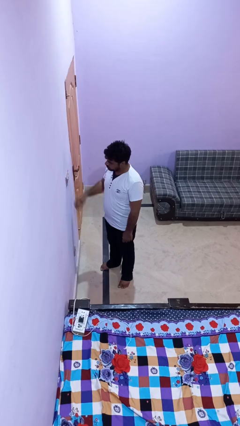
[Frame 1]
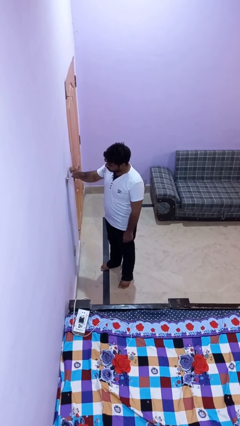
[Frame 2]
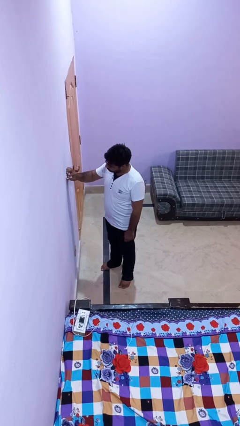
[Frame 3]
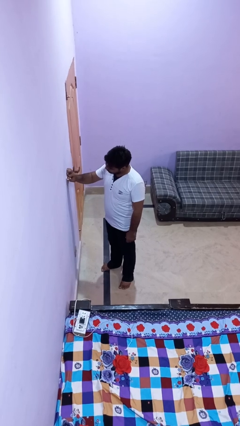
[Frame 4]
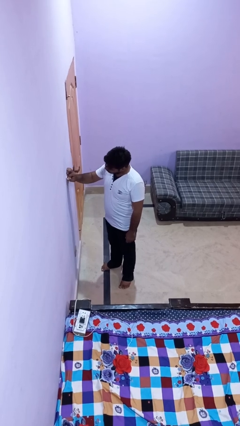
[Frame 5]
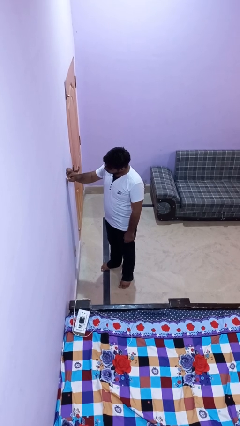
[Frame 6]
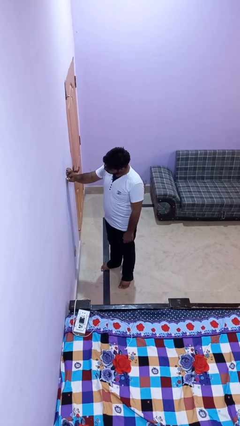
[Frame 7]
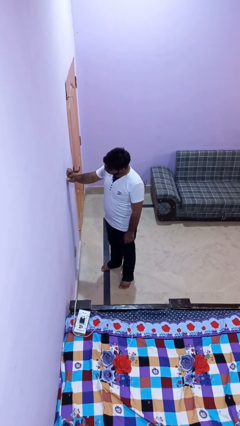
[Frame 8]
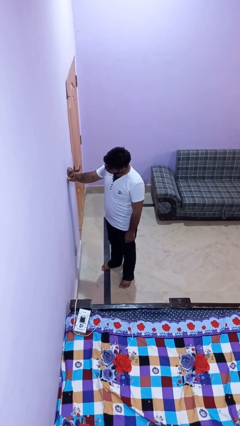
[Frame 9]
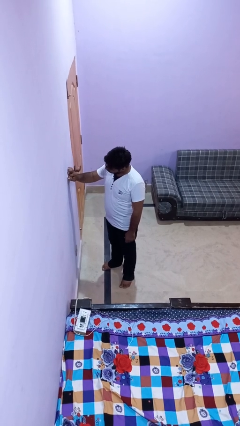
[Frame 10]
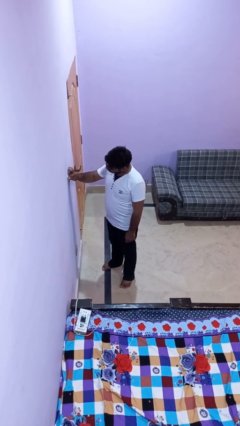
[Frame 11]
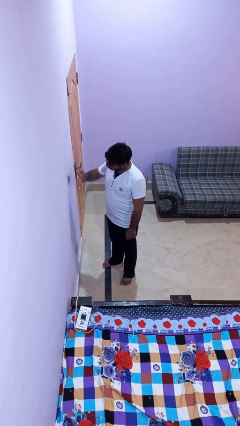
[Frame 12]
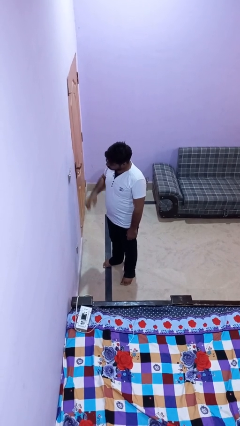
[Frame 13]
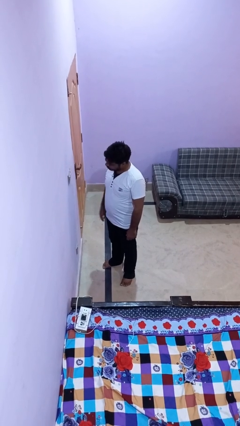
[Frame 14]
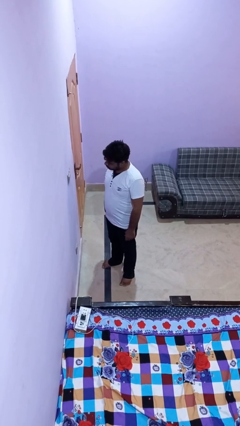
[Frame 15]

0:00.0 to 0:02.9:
person adjusts thermostat

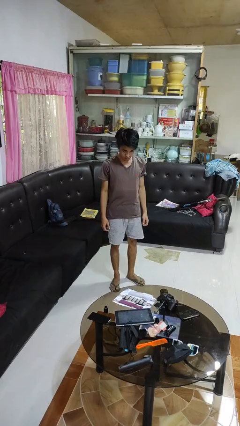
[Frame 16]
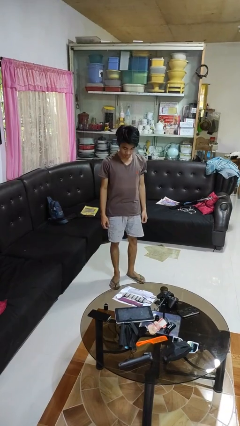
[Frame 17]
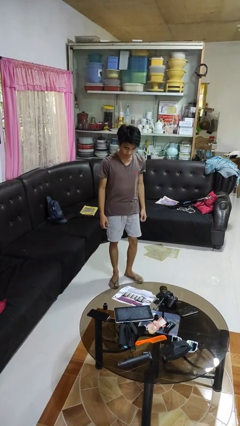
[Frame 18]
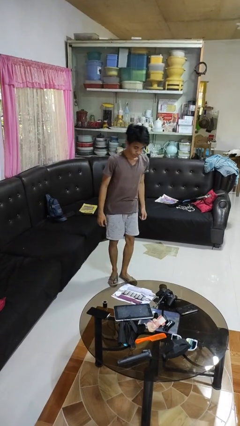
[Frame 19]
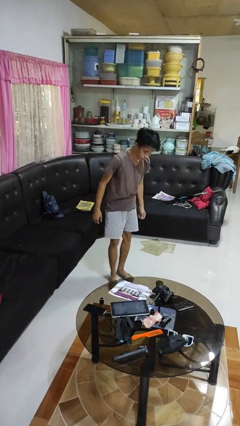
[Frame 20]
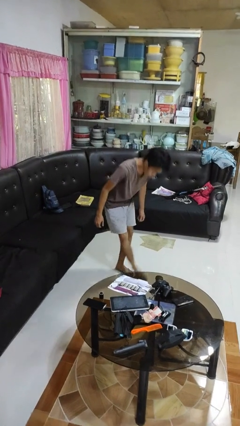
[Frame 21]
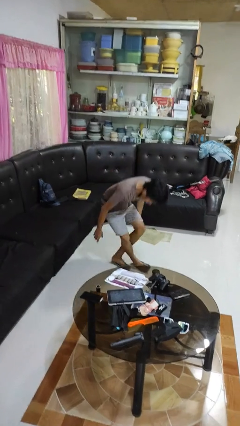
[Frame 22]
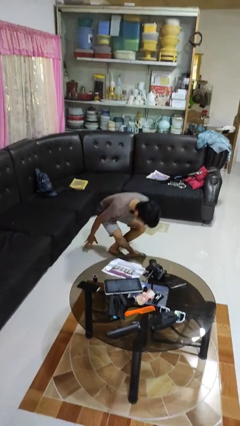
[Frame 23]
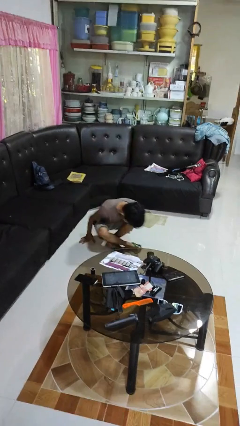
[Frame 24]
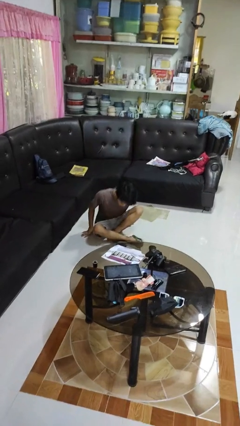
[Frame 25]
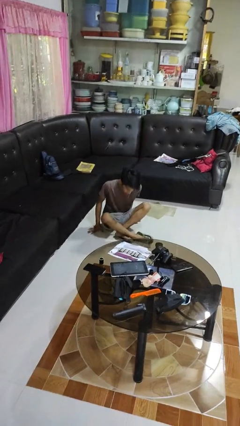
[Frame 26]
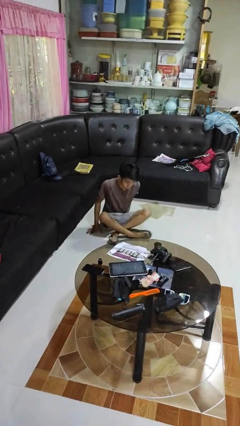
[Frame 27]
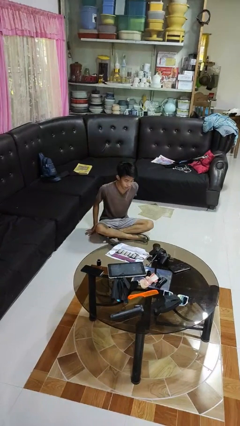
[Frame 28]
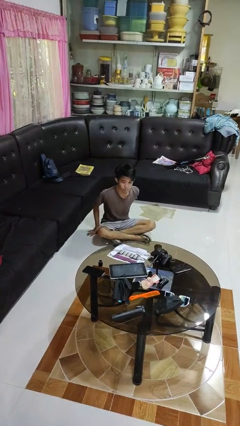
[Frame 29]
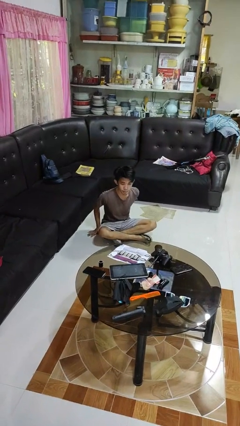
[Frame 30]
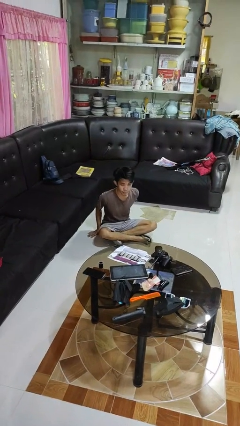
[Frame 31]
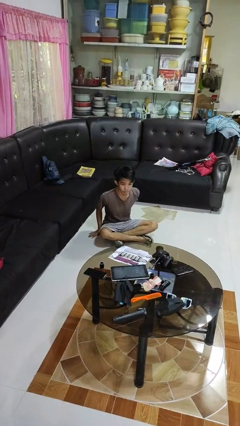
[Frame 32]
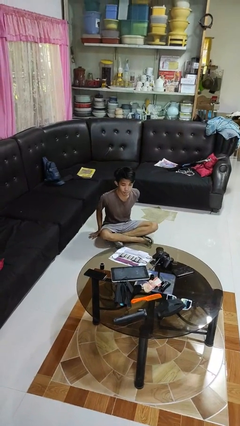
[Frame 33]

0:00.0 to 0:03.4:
person sits crisscross

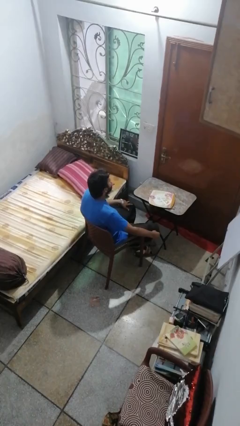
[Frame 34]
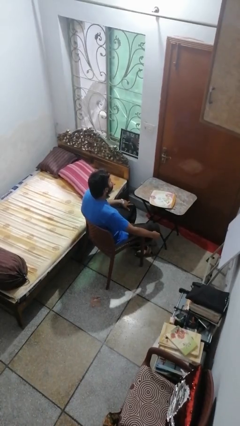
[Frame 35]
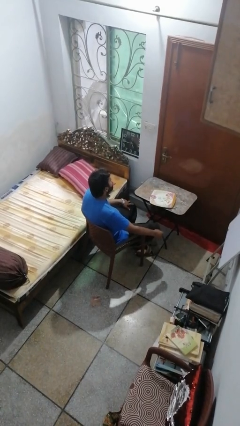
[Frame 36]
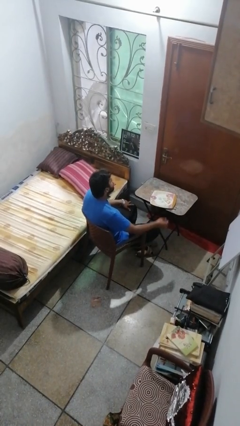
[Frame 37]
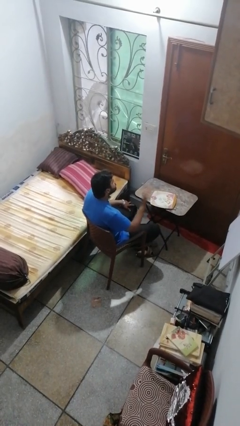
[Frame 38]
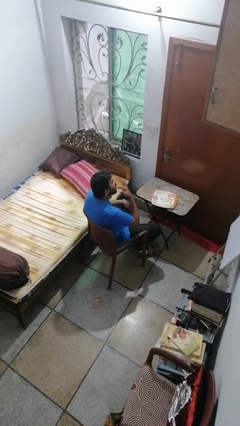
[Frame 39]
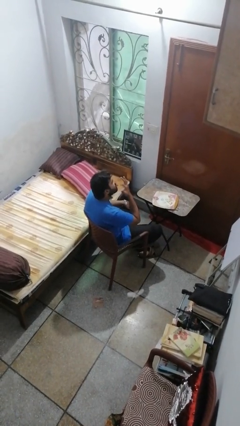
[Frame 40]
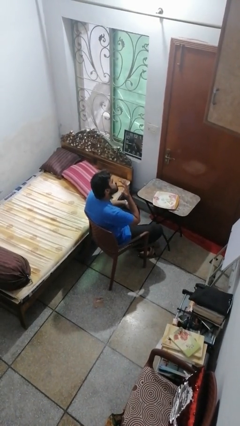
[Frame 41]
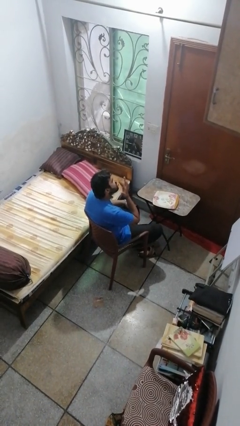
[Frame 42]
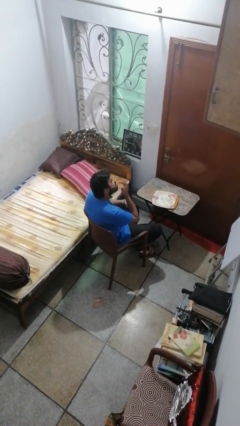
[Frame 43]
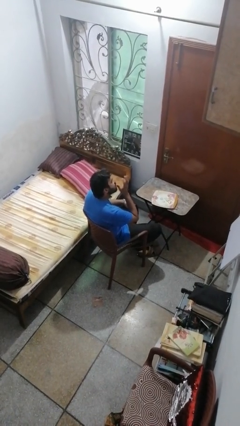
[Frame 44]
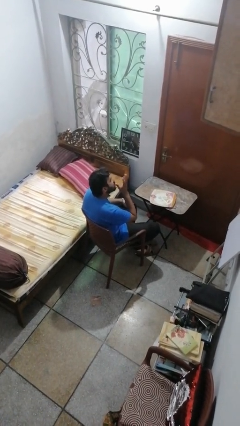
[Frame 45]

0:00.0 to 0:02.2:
person licks fingers

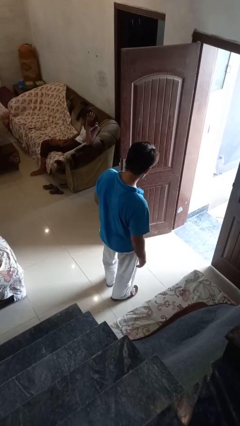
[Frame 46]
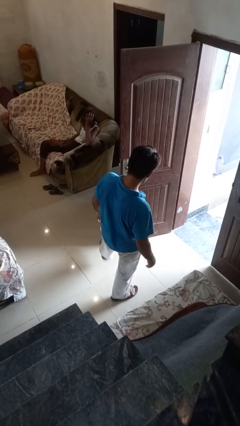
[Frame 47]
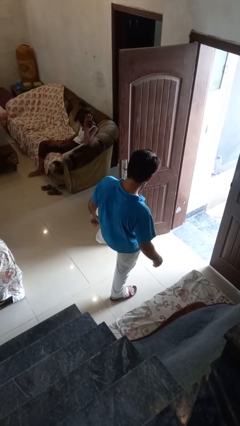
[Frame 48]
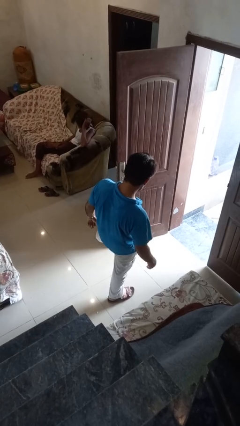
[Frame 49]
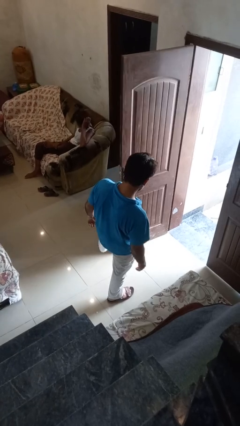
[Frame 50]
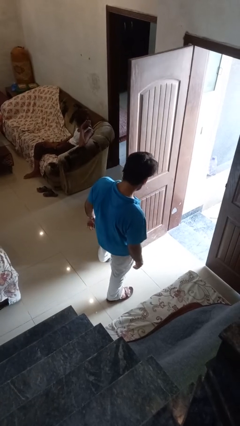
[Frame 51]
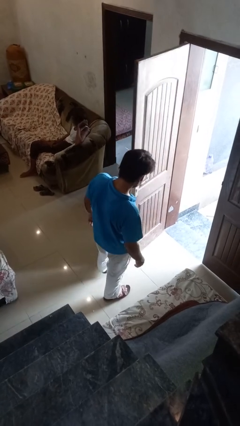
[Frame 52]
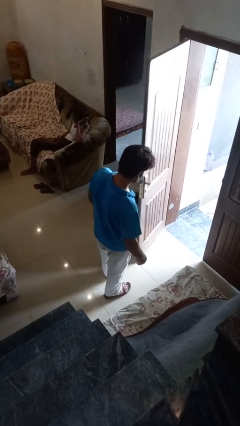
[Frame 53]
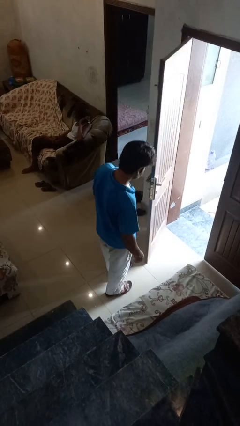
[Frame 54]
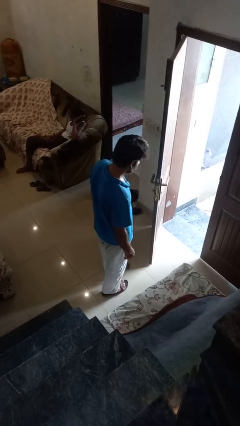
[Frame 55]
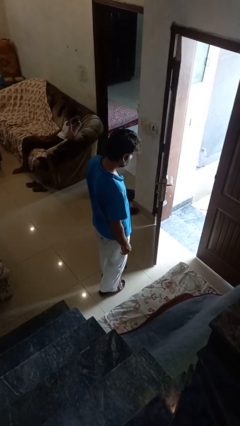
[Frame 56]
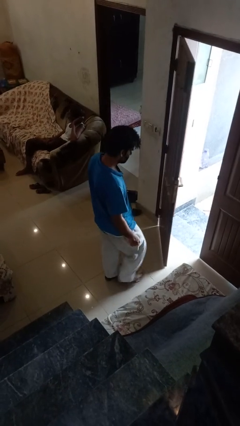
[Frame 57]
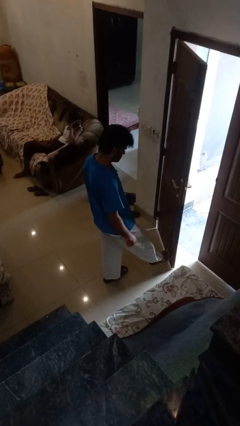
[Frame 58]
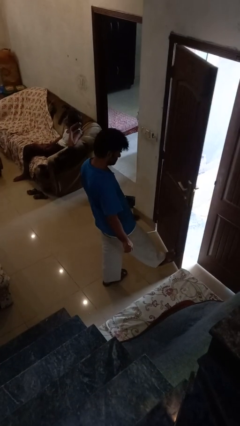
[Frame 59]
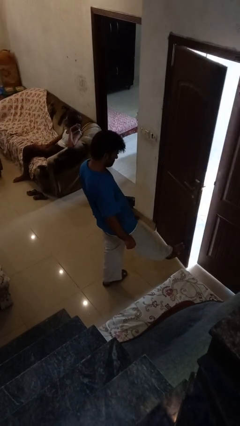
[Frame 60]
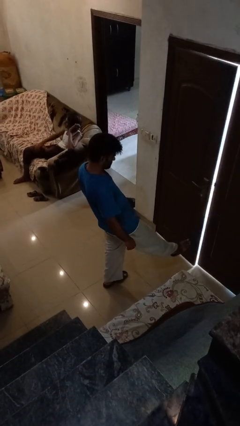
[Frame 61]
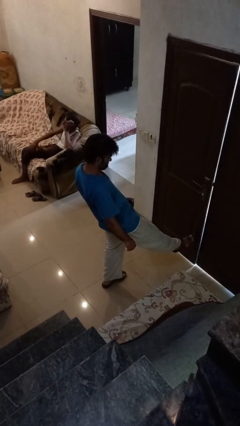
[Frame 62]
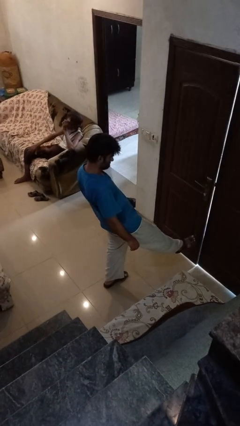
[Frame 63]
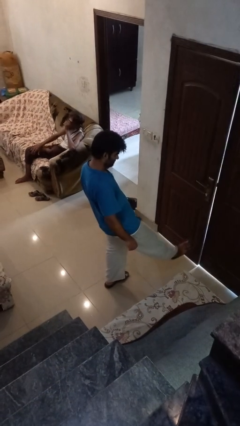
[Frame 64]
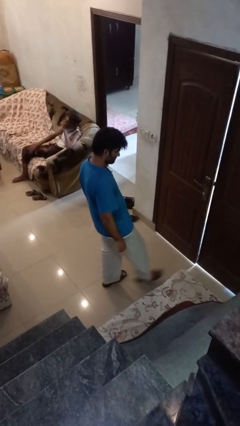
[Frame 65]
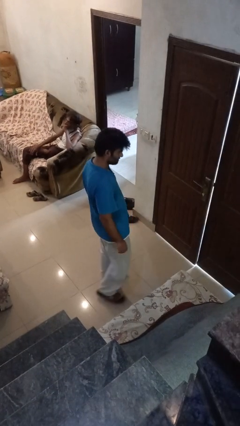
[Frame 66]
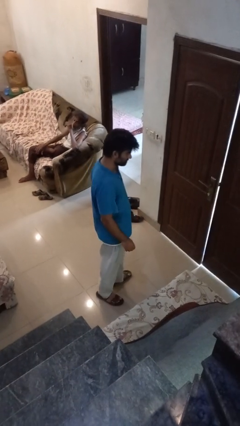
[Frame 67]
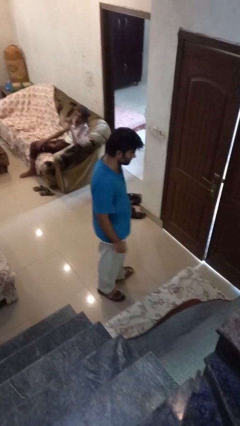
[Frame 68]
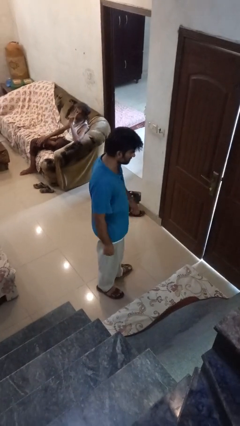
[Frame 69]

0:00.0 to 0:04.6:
person closes door with foot

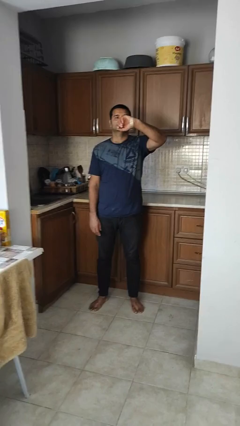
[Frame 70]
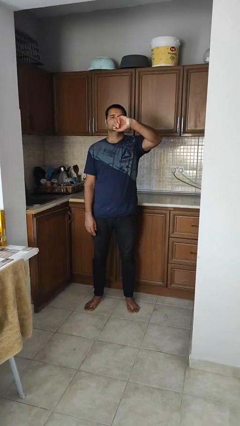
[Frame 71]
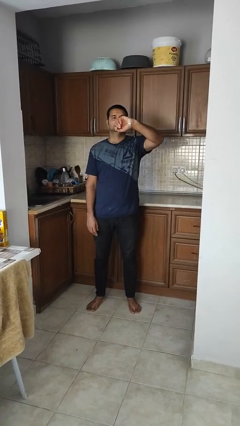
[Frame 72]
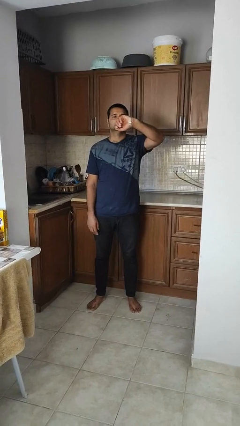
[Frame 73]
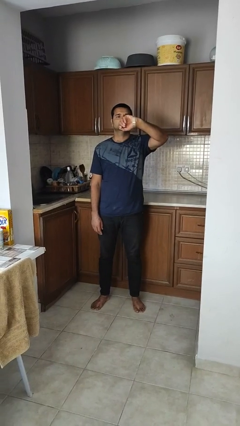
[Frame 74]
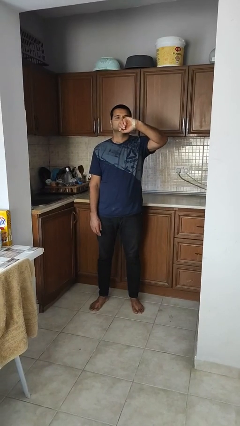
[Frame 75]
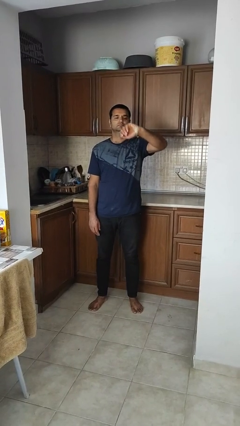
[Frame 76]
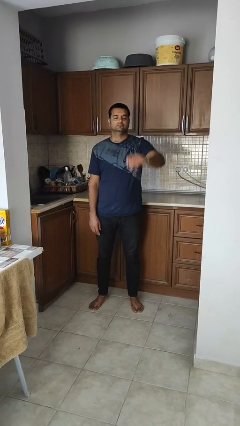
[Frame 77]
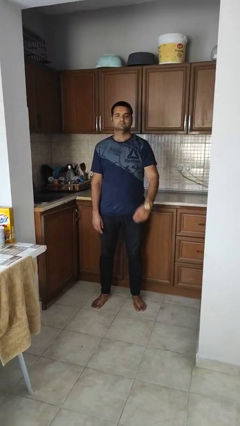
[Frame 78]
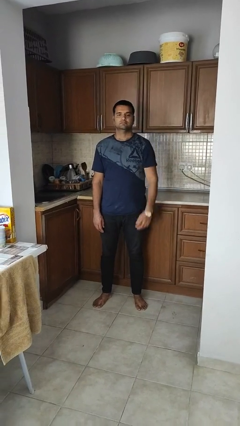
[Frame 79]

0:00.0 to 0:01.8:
person looks at wristwatch

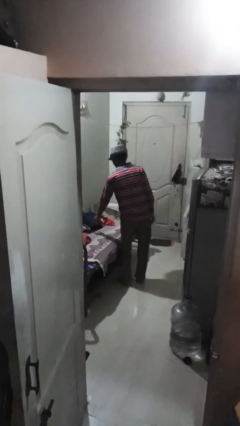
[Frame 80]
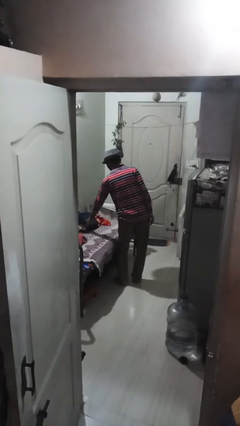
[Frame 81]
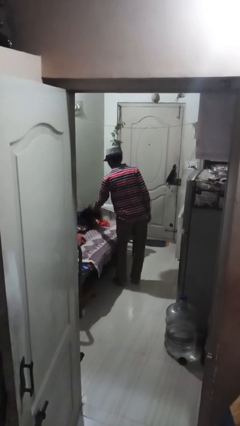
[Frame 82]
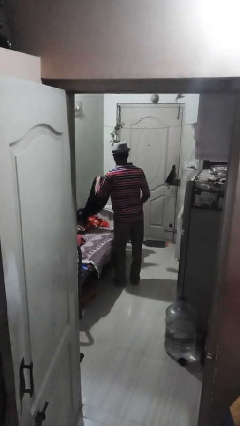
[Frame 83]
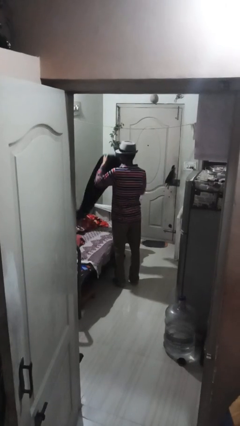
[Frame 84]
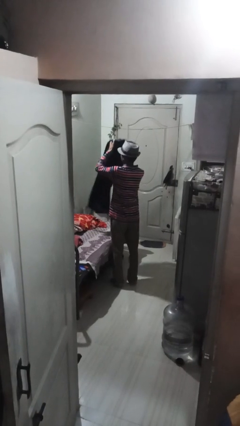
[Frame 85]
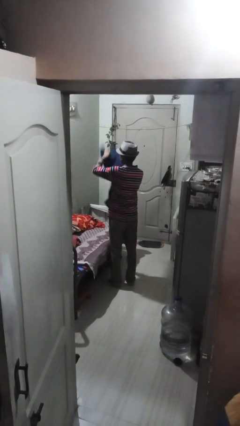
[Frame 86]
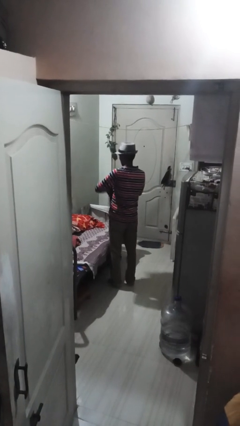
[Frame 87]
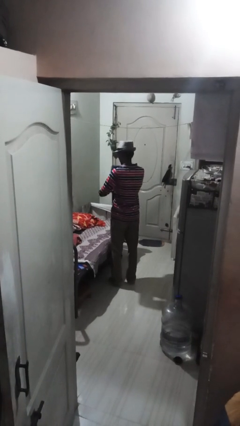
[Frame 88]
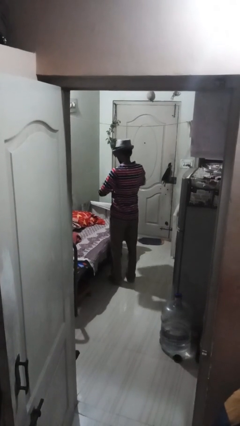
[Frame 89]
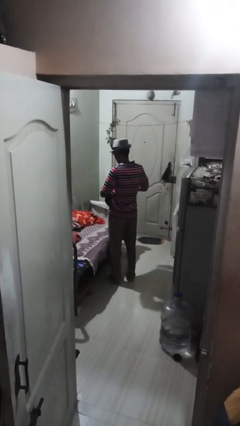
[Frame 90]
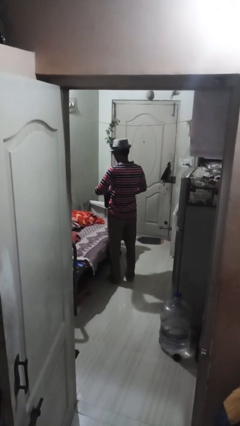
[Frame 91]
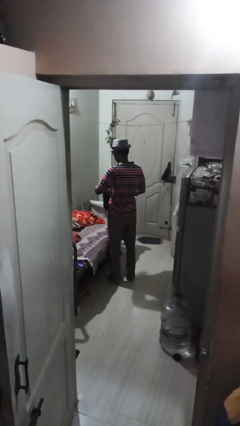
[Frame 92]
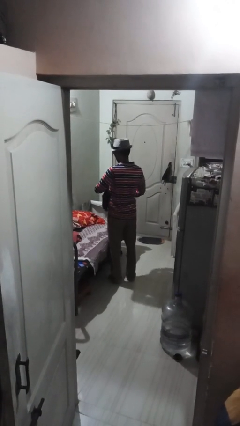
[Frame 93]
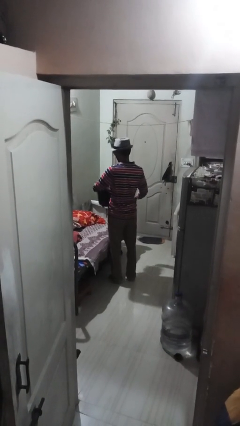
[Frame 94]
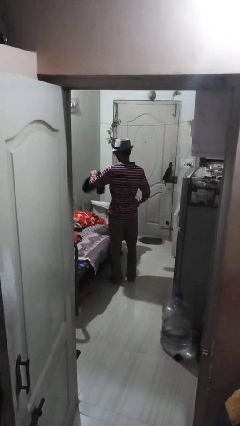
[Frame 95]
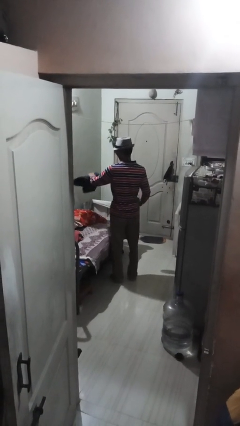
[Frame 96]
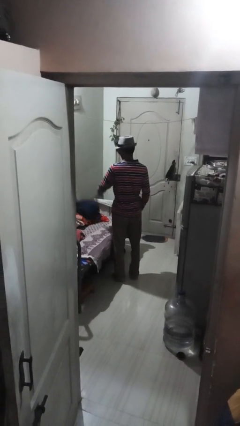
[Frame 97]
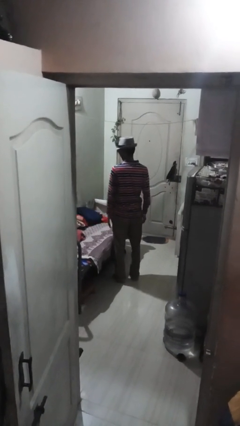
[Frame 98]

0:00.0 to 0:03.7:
person folds pants
